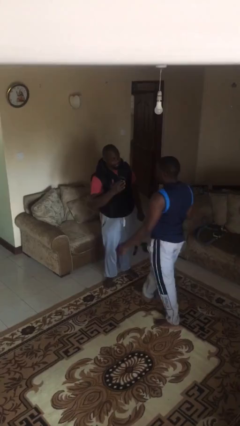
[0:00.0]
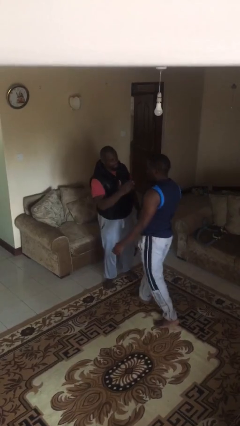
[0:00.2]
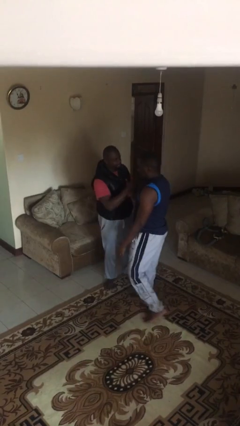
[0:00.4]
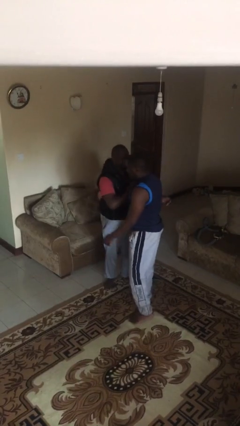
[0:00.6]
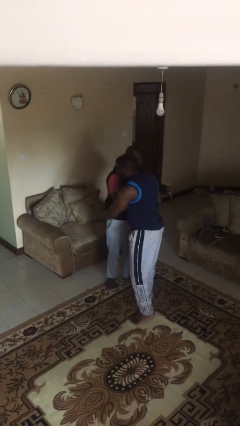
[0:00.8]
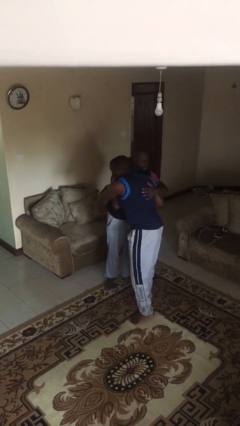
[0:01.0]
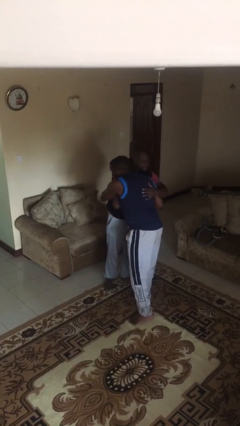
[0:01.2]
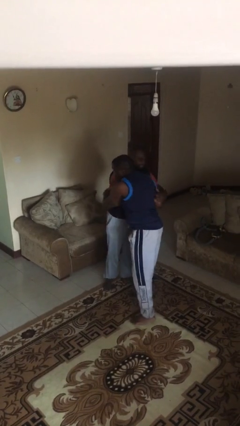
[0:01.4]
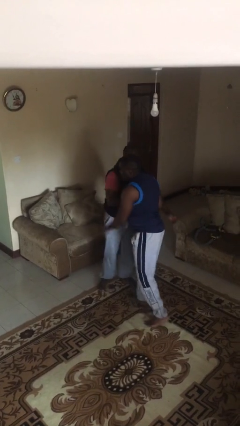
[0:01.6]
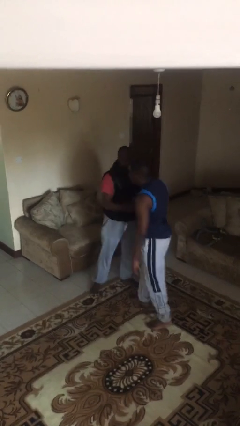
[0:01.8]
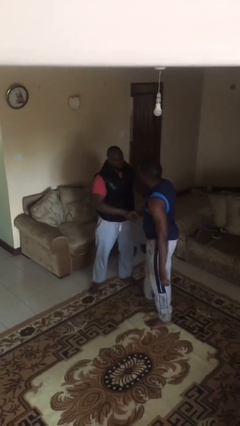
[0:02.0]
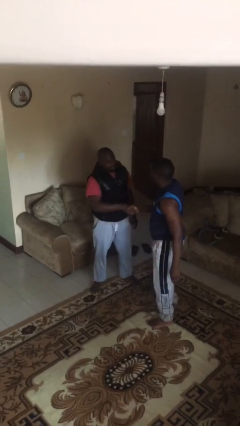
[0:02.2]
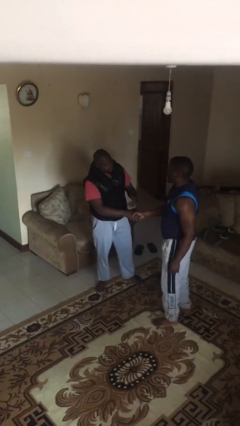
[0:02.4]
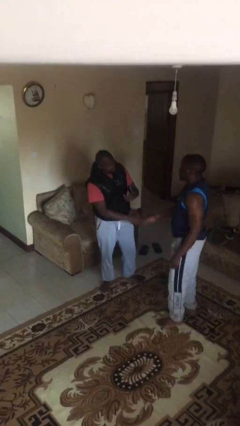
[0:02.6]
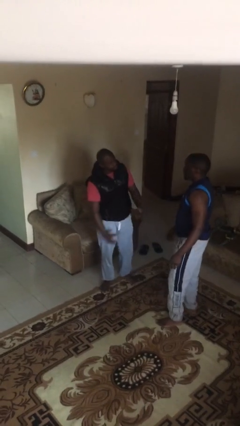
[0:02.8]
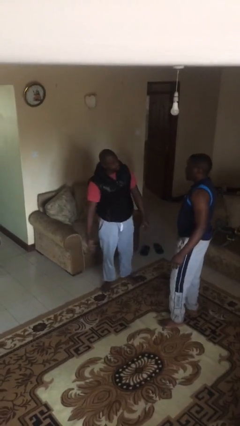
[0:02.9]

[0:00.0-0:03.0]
person embraces person

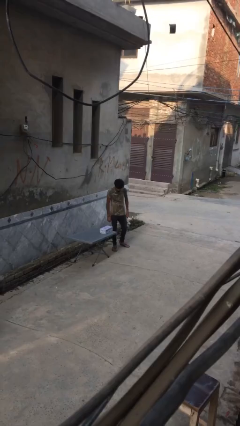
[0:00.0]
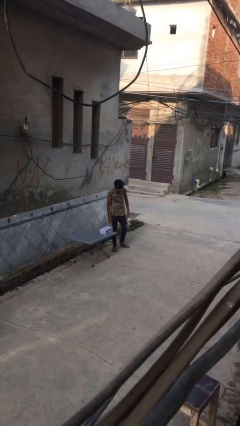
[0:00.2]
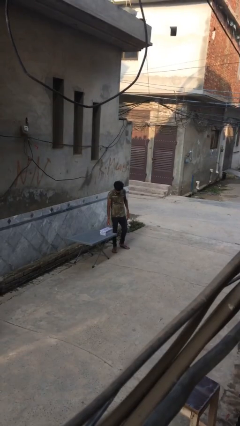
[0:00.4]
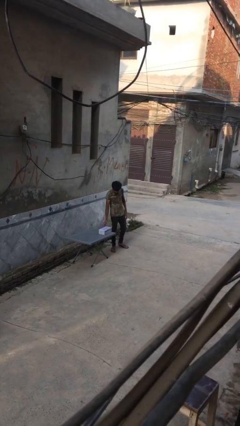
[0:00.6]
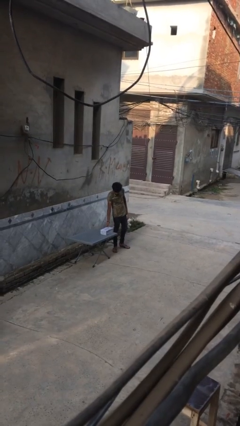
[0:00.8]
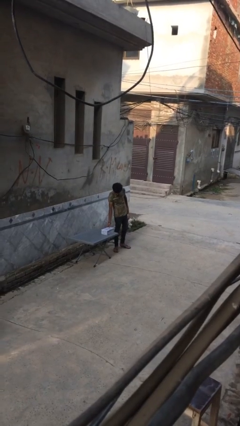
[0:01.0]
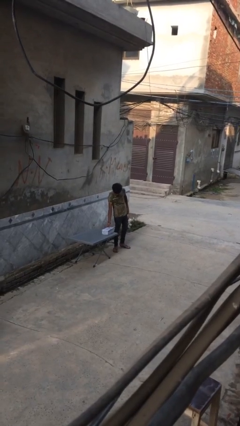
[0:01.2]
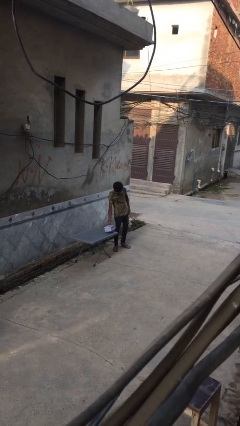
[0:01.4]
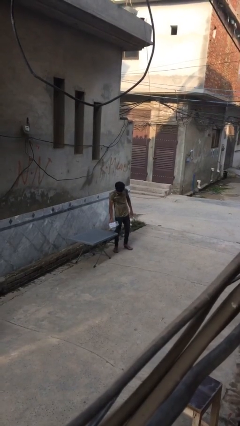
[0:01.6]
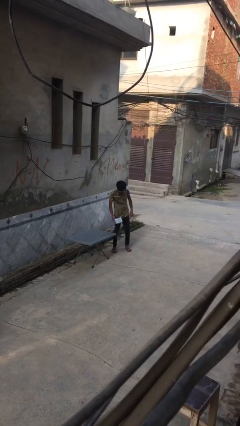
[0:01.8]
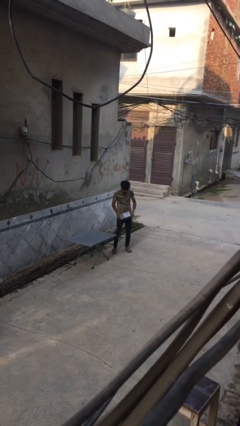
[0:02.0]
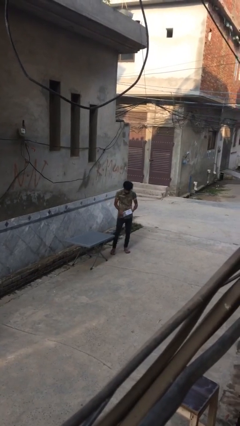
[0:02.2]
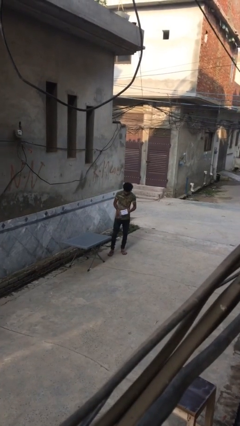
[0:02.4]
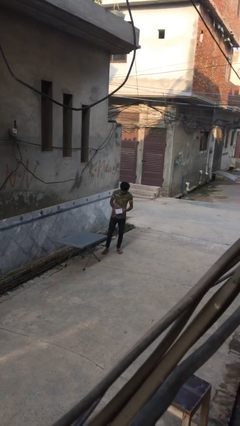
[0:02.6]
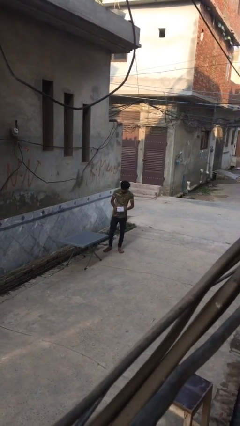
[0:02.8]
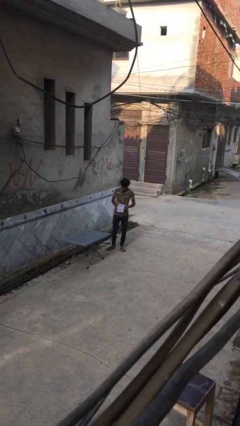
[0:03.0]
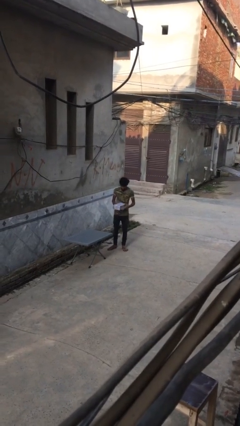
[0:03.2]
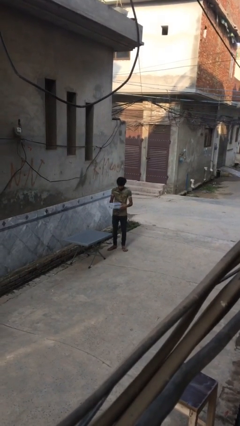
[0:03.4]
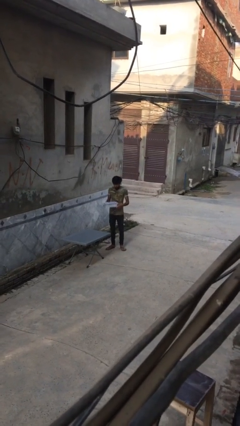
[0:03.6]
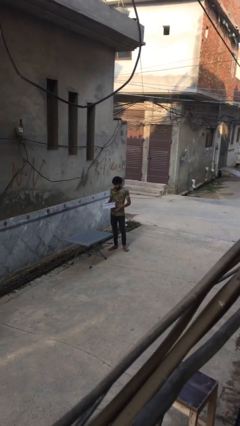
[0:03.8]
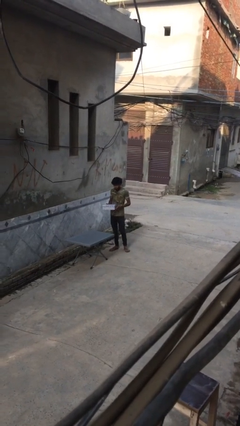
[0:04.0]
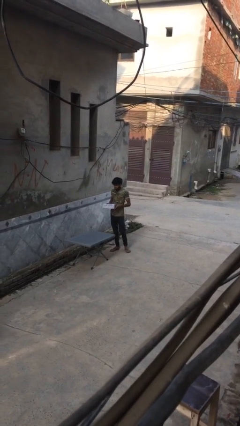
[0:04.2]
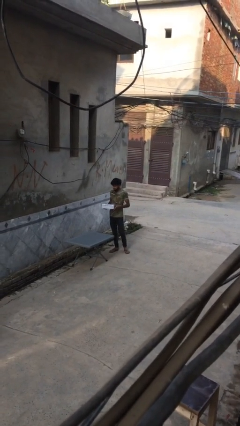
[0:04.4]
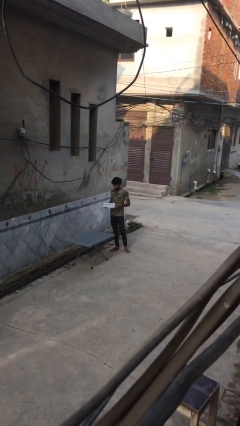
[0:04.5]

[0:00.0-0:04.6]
person picks up object from table

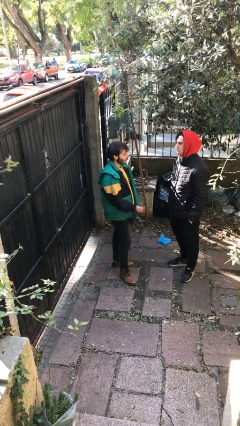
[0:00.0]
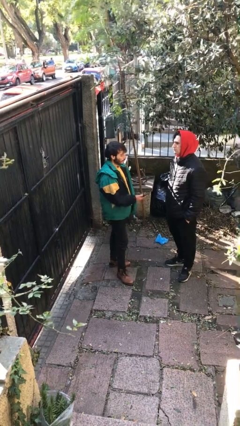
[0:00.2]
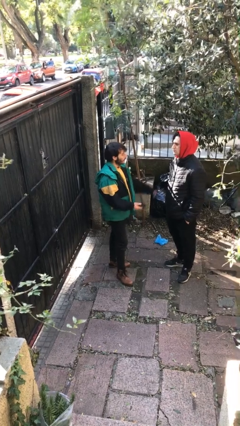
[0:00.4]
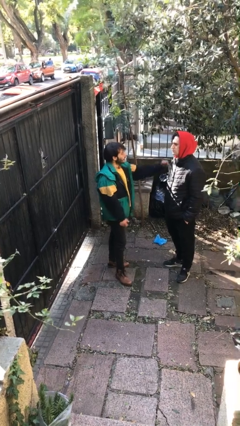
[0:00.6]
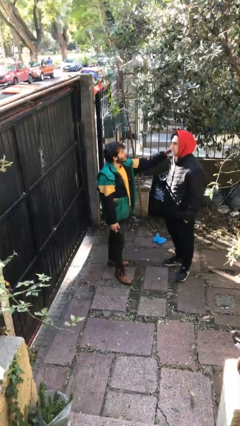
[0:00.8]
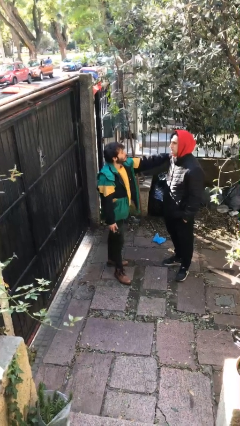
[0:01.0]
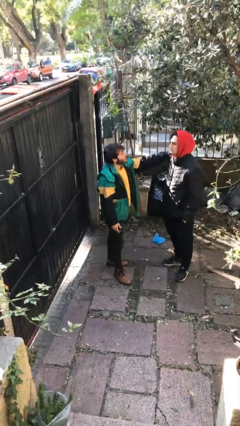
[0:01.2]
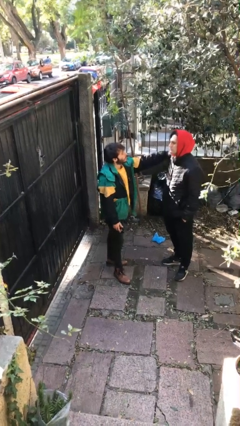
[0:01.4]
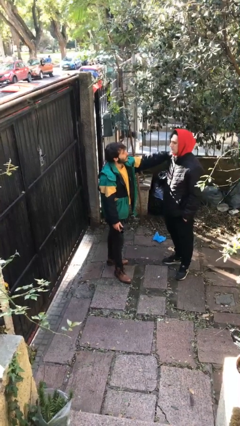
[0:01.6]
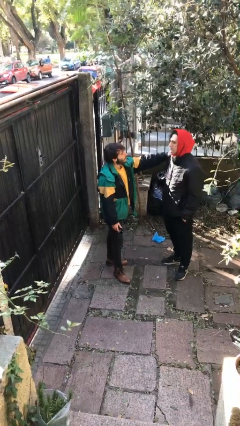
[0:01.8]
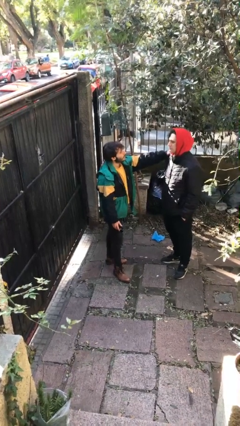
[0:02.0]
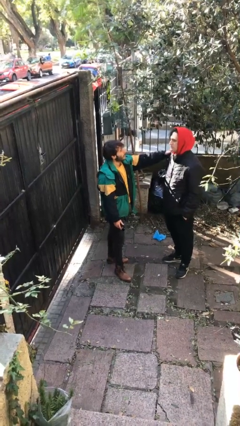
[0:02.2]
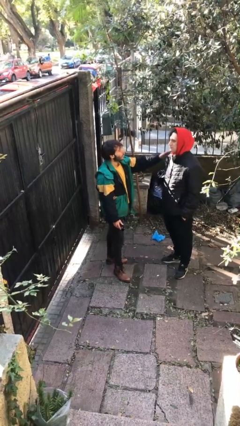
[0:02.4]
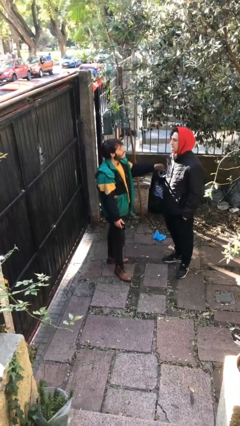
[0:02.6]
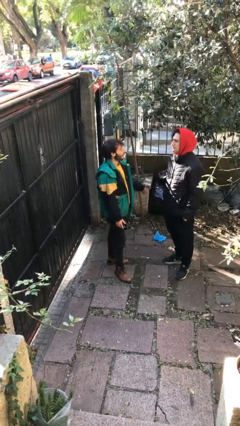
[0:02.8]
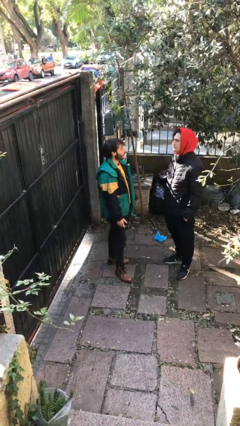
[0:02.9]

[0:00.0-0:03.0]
person pounds shoulders of person

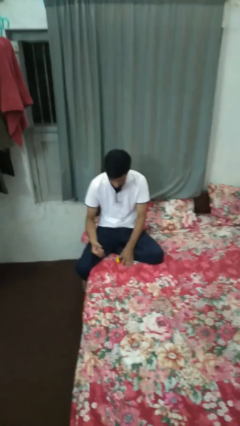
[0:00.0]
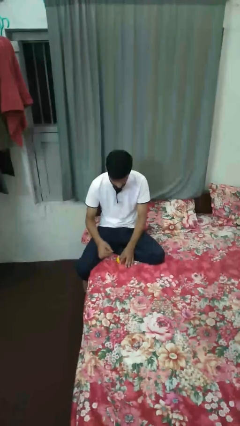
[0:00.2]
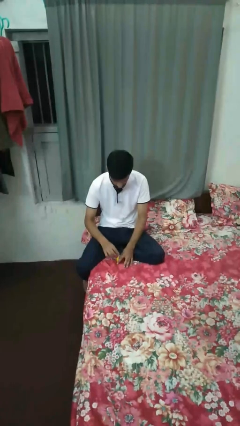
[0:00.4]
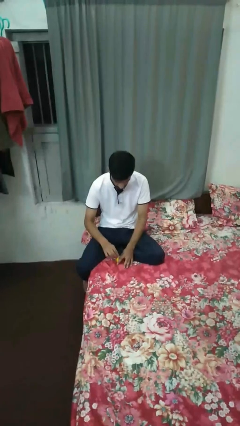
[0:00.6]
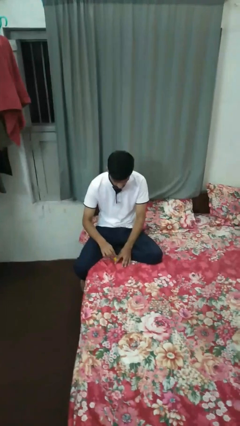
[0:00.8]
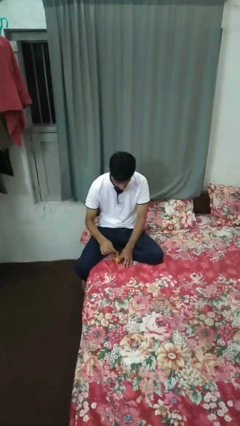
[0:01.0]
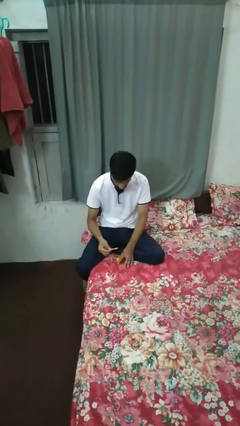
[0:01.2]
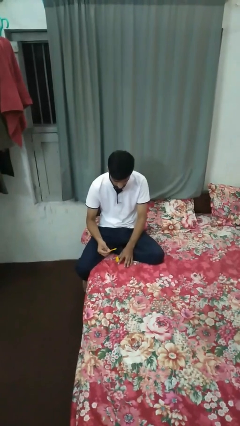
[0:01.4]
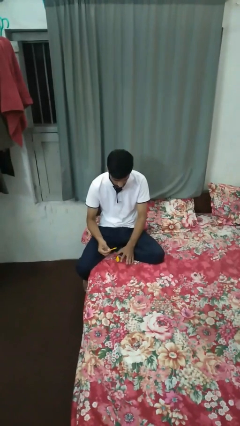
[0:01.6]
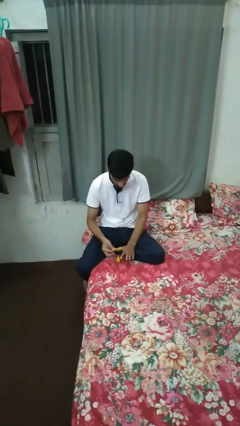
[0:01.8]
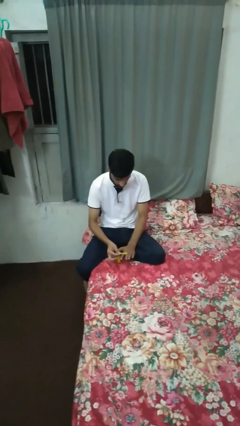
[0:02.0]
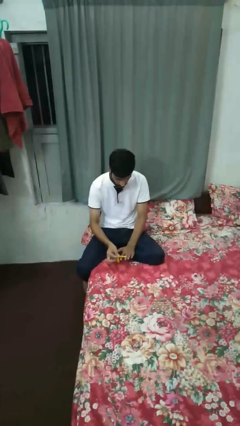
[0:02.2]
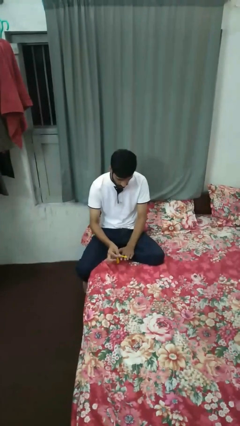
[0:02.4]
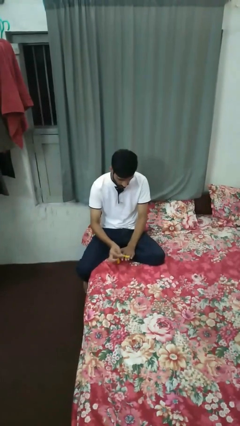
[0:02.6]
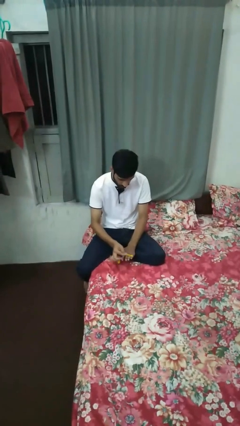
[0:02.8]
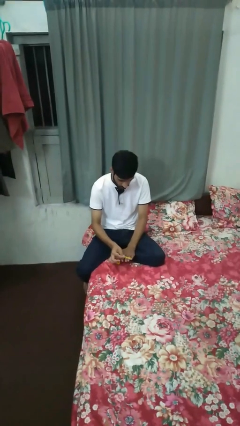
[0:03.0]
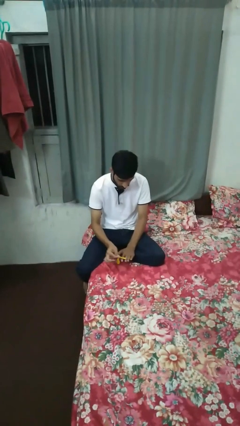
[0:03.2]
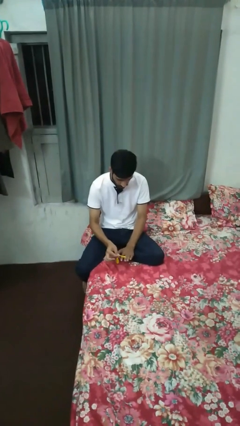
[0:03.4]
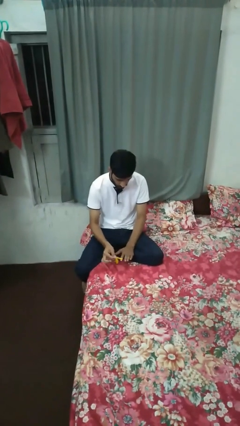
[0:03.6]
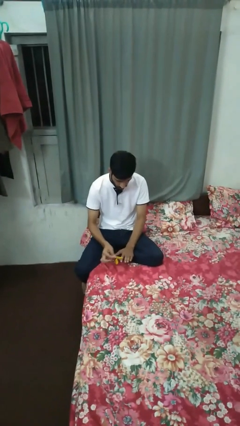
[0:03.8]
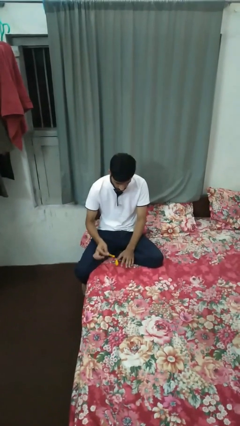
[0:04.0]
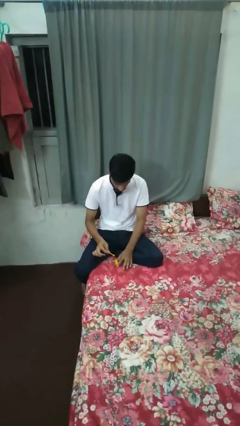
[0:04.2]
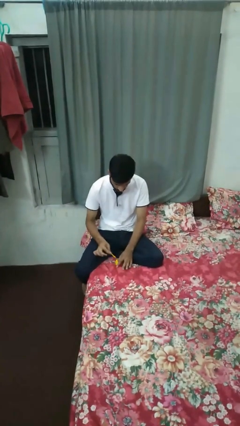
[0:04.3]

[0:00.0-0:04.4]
person paints fingernails

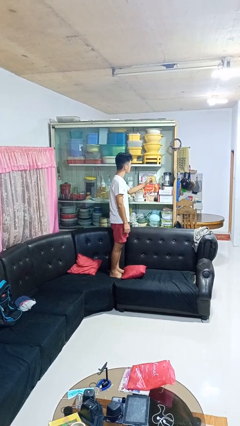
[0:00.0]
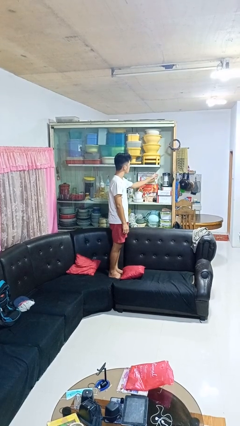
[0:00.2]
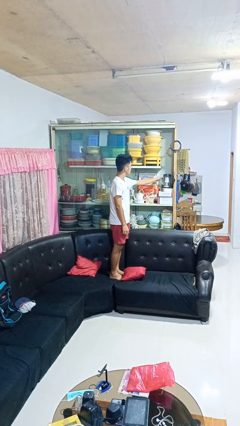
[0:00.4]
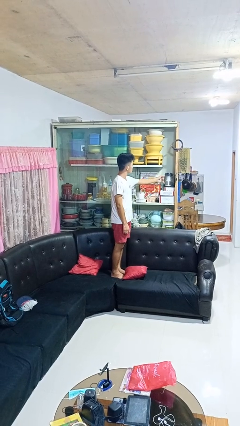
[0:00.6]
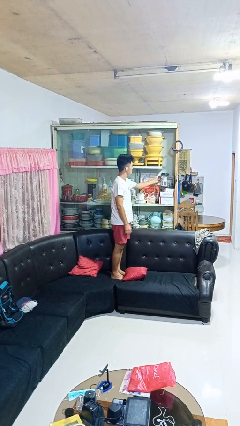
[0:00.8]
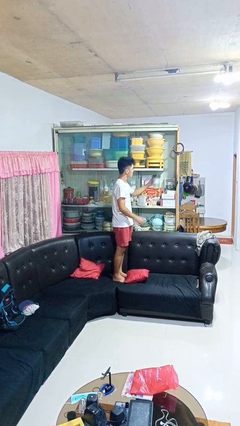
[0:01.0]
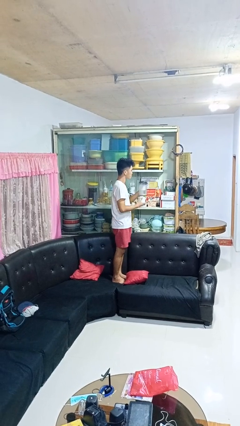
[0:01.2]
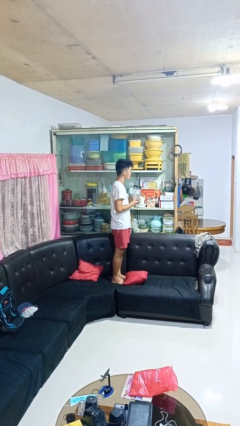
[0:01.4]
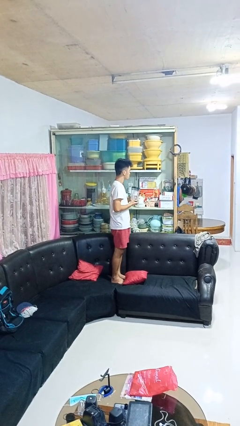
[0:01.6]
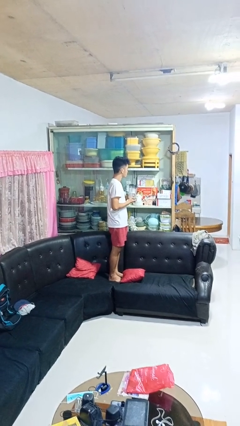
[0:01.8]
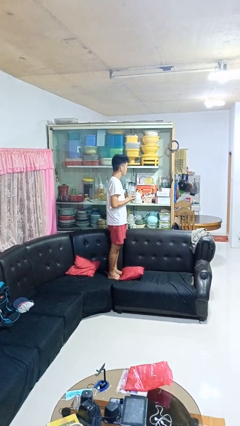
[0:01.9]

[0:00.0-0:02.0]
person picks up object from cabinet

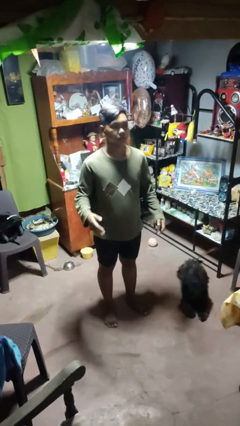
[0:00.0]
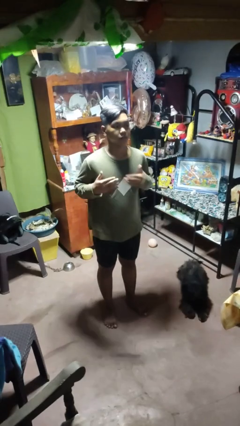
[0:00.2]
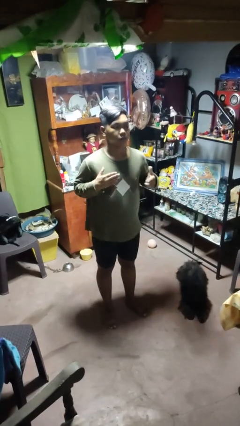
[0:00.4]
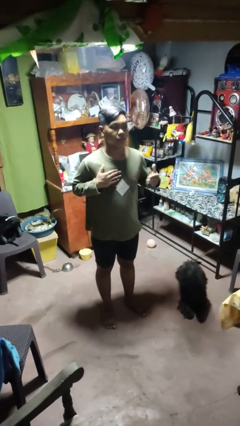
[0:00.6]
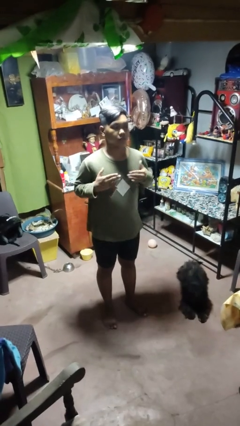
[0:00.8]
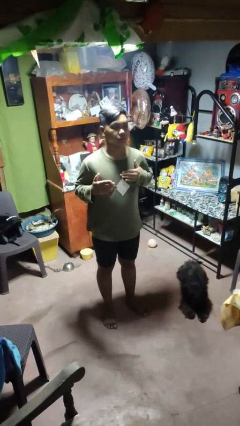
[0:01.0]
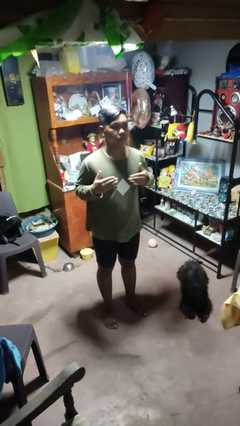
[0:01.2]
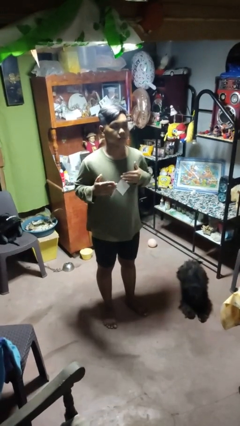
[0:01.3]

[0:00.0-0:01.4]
person drums on chest
